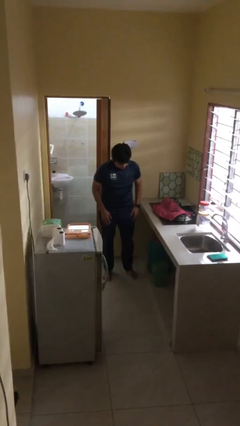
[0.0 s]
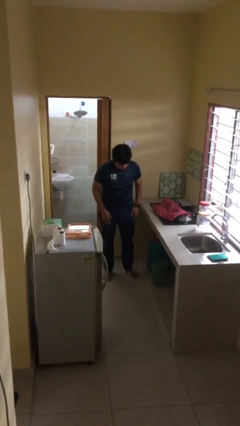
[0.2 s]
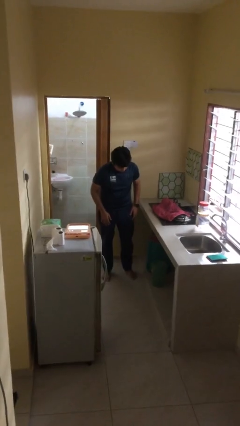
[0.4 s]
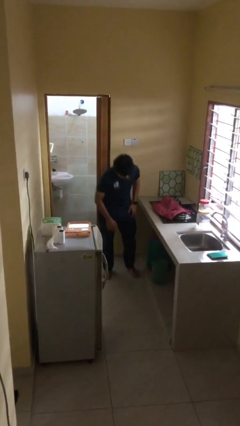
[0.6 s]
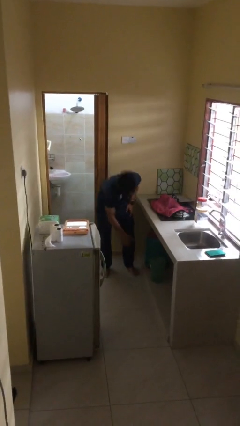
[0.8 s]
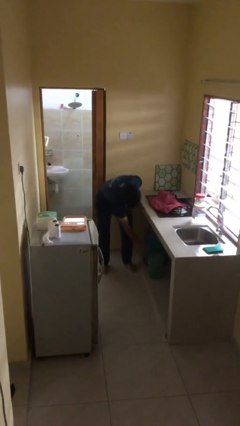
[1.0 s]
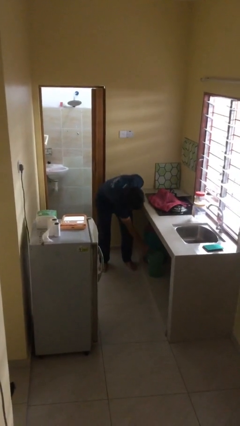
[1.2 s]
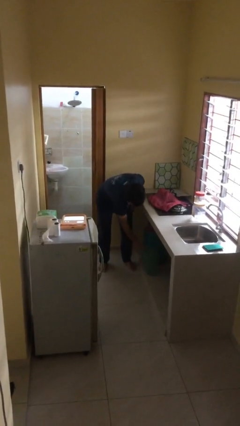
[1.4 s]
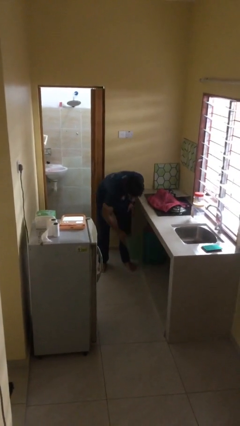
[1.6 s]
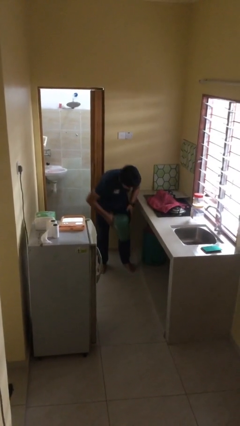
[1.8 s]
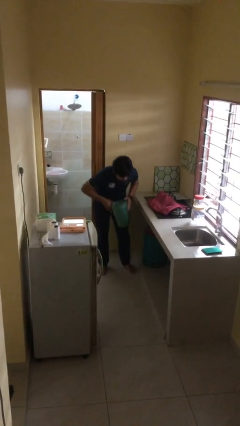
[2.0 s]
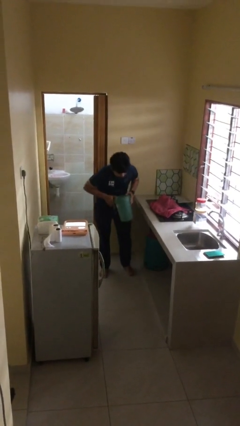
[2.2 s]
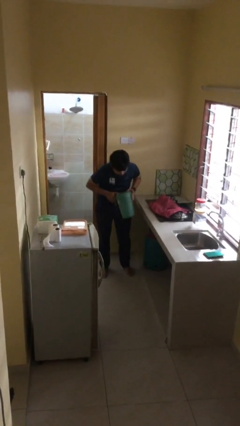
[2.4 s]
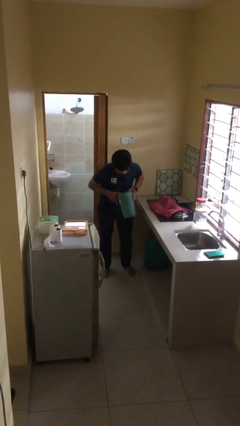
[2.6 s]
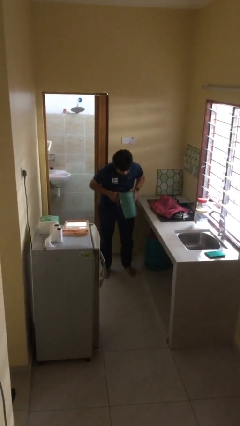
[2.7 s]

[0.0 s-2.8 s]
person picks up object from cabinet

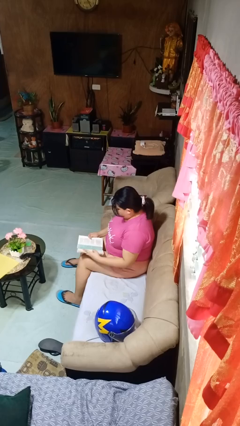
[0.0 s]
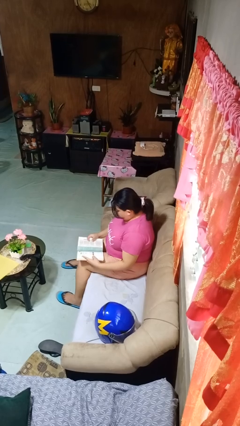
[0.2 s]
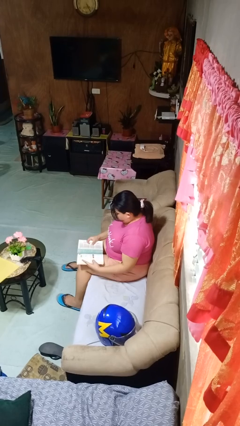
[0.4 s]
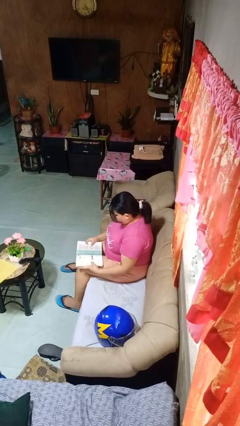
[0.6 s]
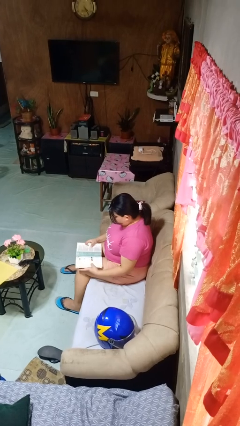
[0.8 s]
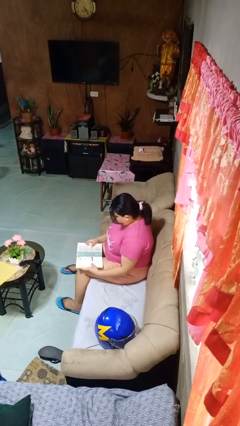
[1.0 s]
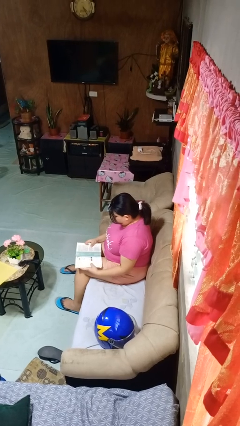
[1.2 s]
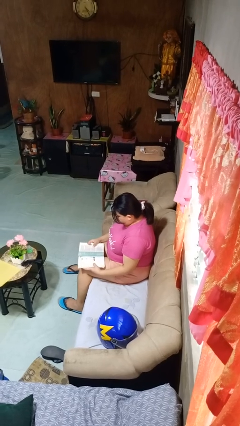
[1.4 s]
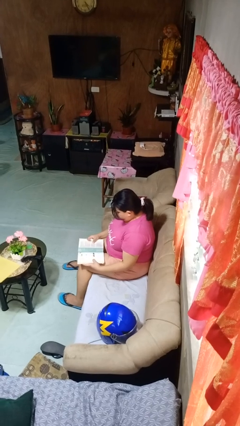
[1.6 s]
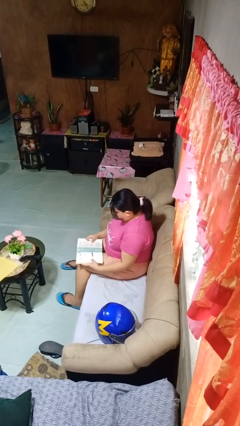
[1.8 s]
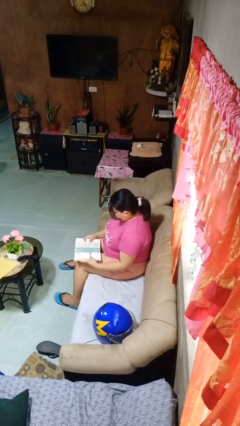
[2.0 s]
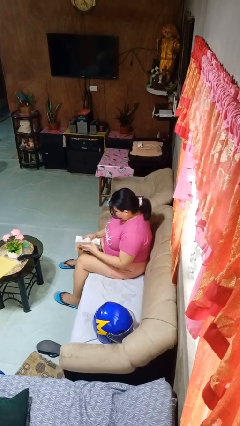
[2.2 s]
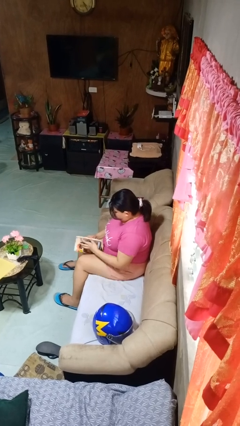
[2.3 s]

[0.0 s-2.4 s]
person reads book

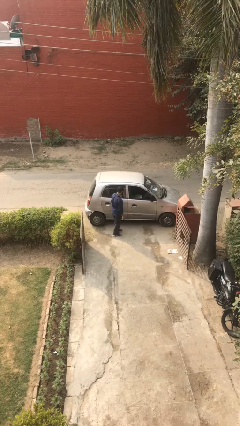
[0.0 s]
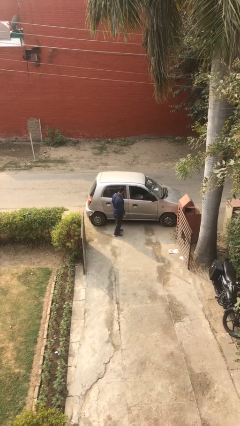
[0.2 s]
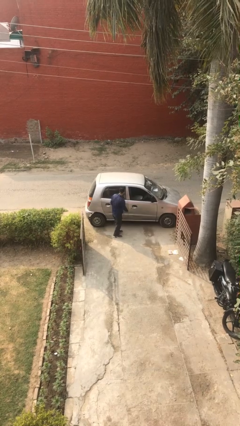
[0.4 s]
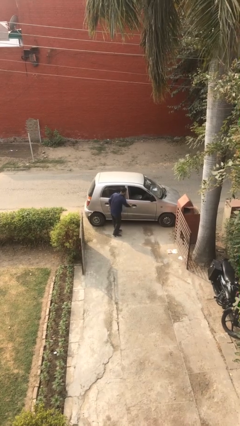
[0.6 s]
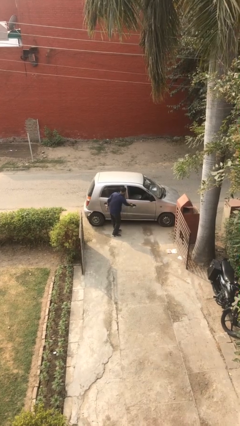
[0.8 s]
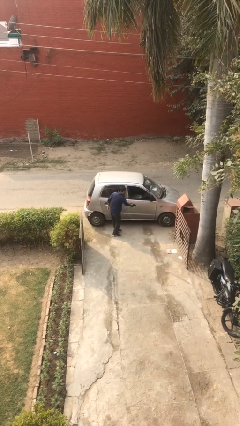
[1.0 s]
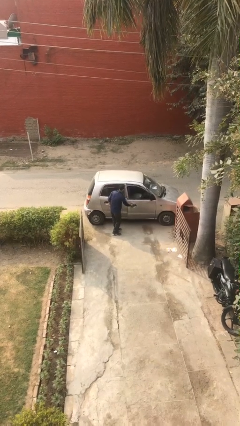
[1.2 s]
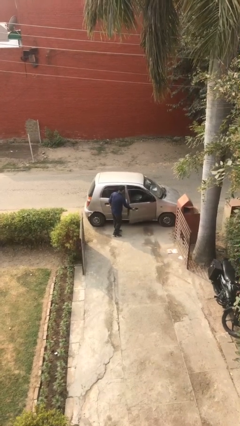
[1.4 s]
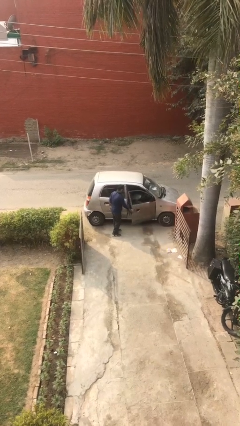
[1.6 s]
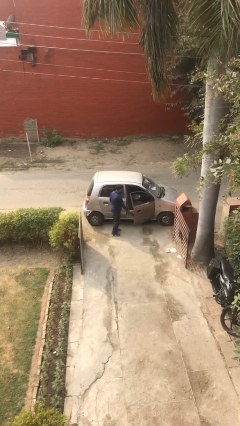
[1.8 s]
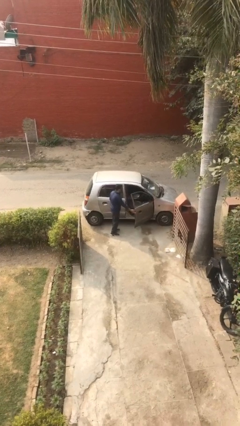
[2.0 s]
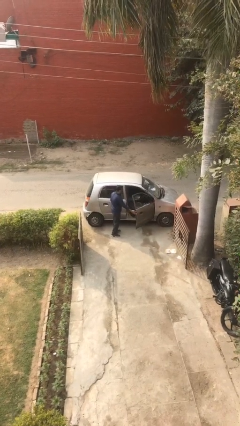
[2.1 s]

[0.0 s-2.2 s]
person opens car door

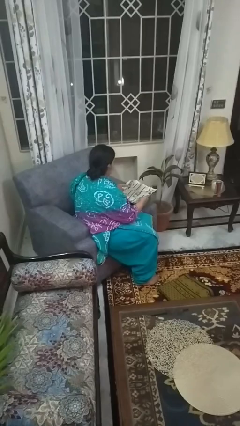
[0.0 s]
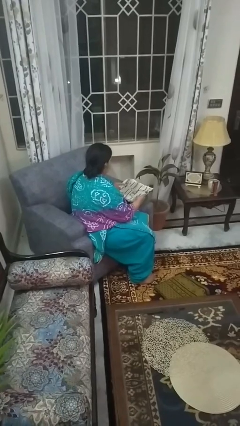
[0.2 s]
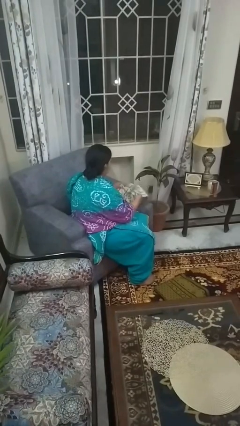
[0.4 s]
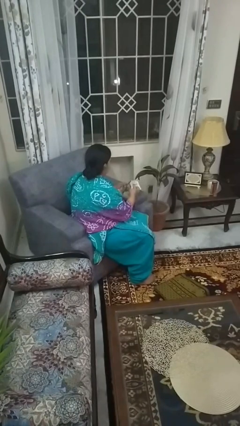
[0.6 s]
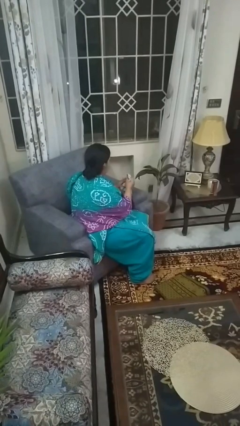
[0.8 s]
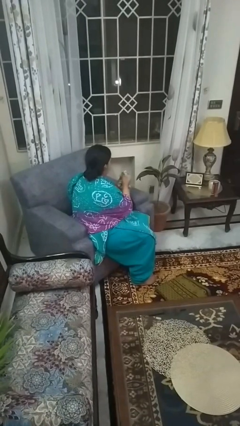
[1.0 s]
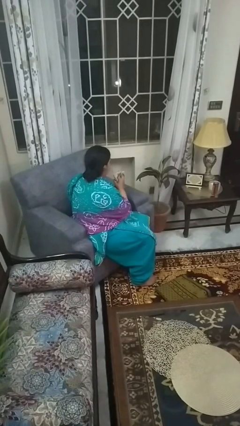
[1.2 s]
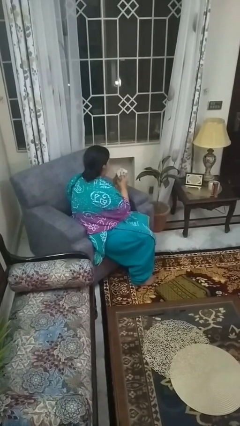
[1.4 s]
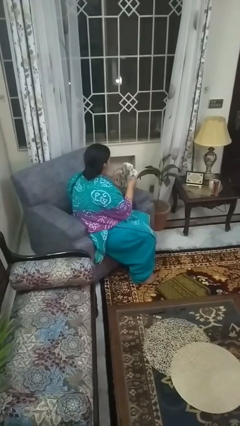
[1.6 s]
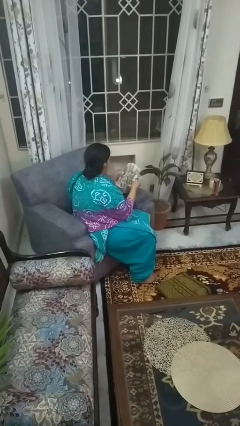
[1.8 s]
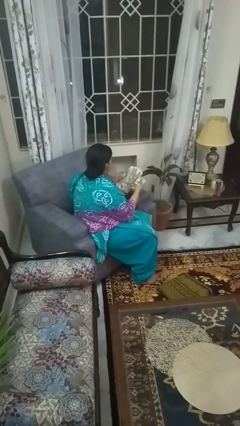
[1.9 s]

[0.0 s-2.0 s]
person crumples paper

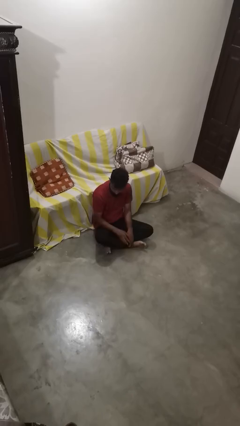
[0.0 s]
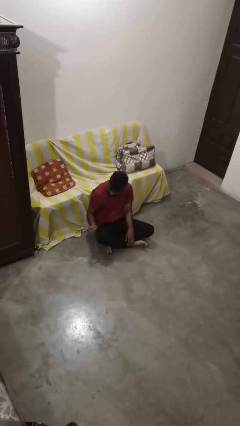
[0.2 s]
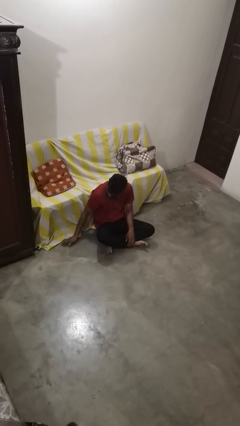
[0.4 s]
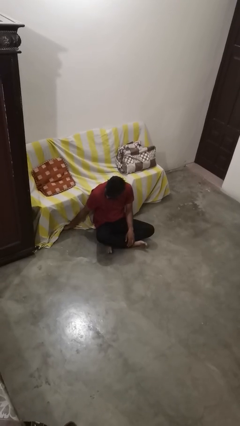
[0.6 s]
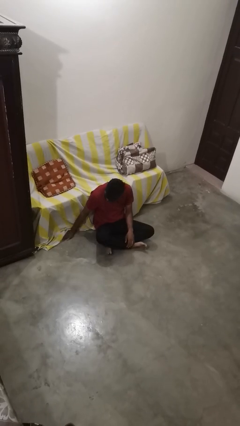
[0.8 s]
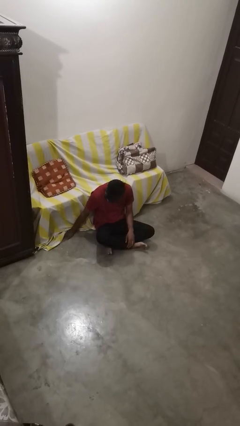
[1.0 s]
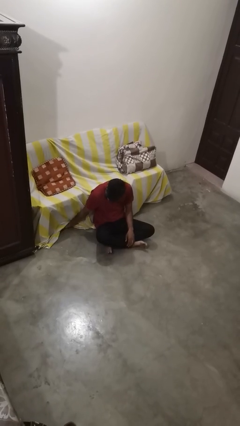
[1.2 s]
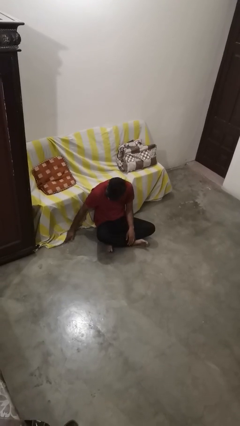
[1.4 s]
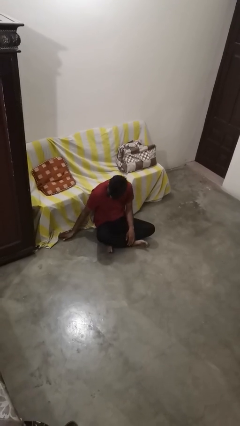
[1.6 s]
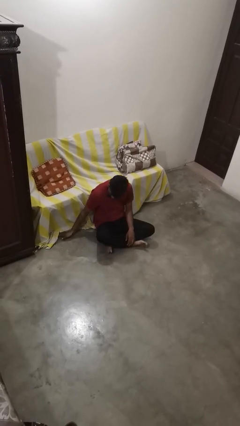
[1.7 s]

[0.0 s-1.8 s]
person searches under couch

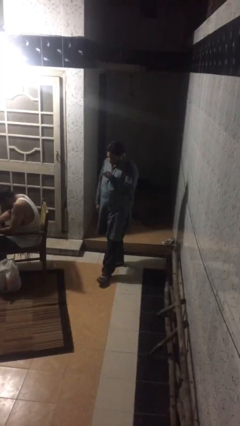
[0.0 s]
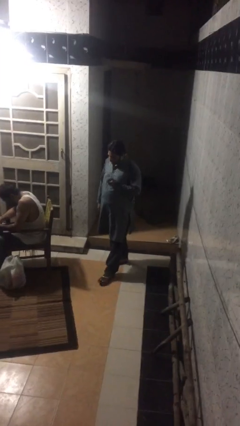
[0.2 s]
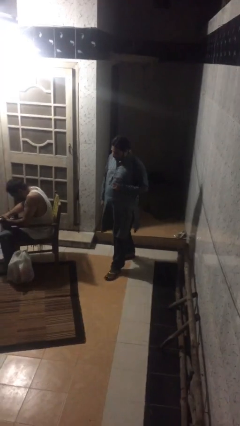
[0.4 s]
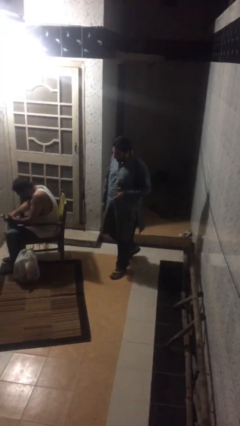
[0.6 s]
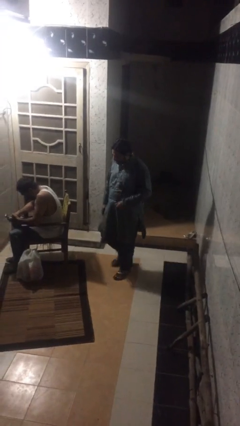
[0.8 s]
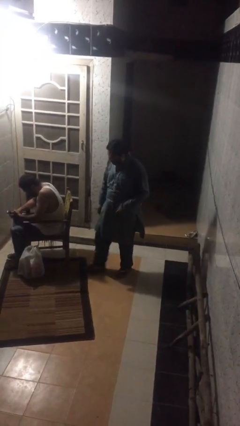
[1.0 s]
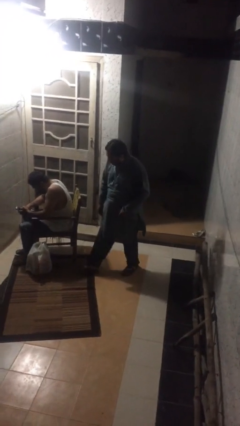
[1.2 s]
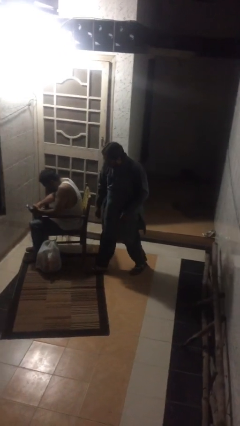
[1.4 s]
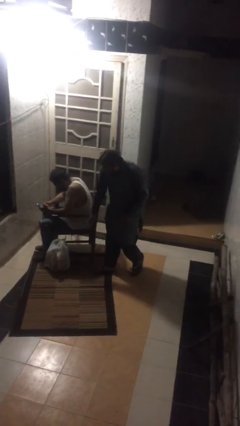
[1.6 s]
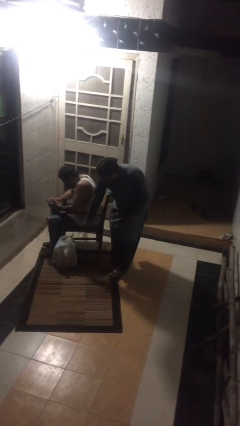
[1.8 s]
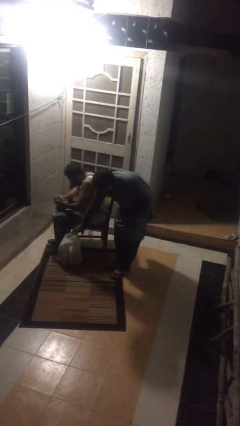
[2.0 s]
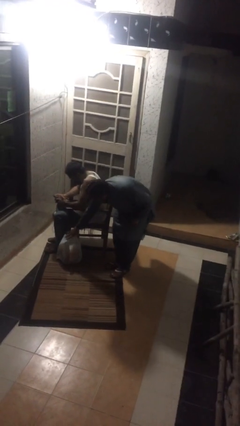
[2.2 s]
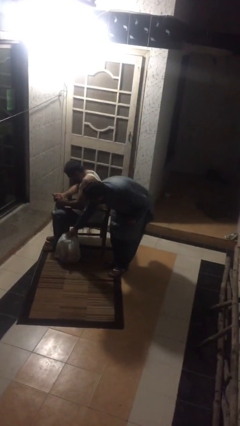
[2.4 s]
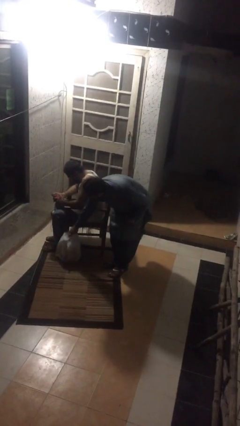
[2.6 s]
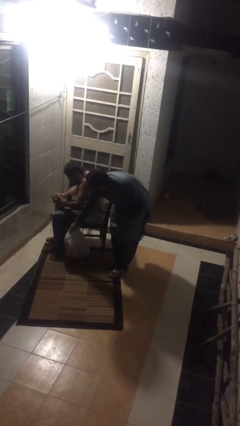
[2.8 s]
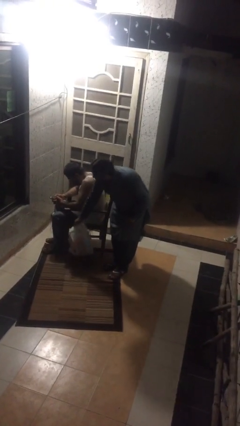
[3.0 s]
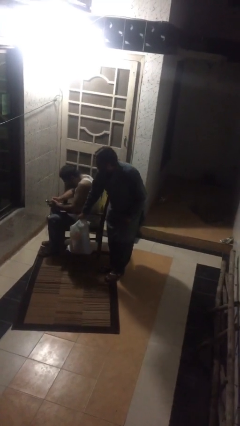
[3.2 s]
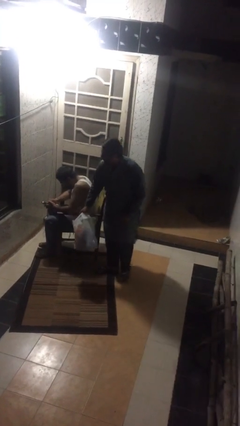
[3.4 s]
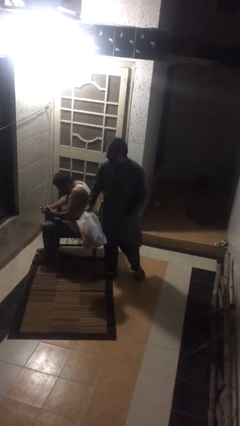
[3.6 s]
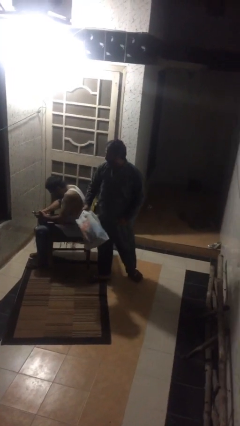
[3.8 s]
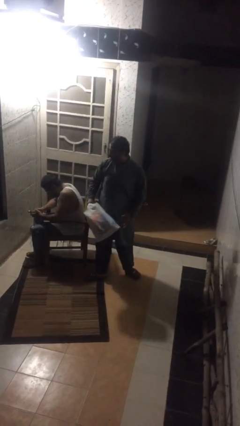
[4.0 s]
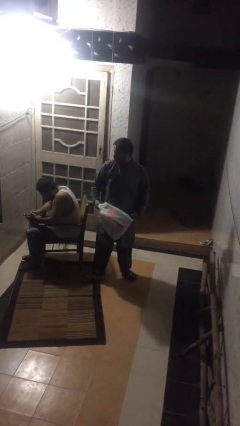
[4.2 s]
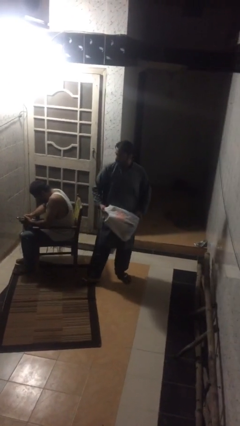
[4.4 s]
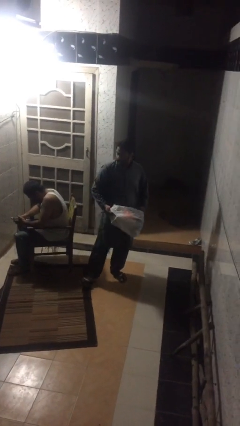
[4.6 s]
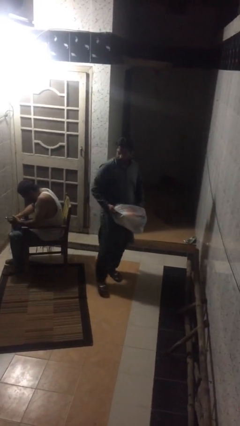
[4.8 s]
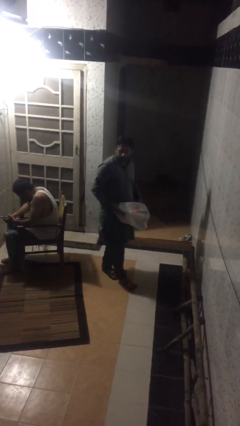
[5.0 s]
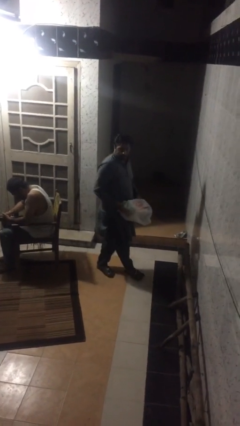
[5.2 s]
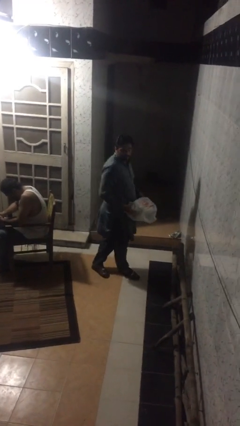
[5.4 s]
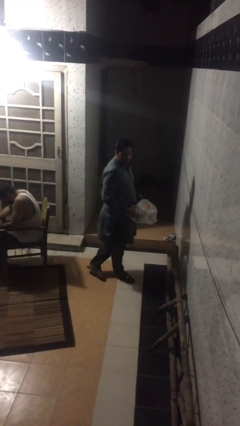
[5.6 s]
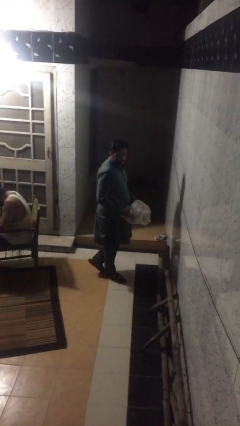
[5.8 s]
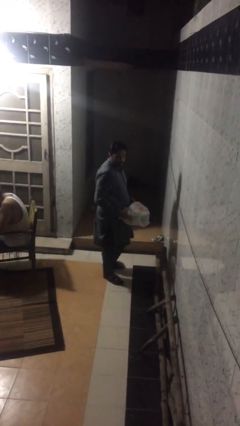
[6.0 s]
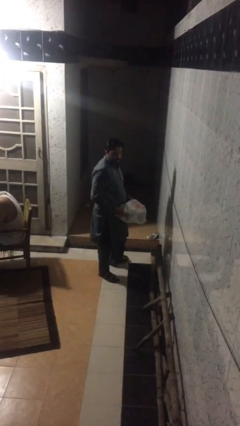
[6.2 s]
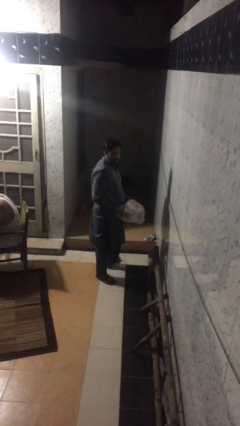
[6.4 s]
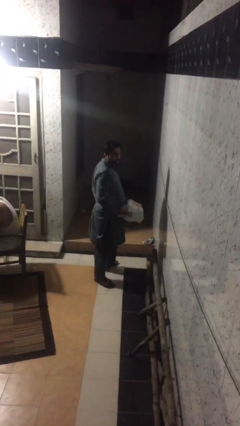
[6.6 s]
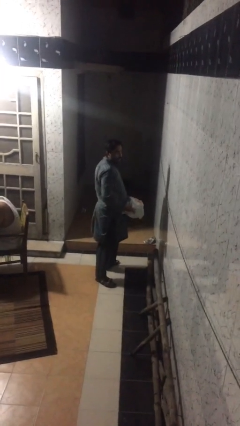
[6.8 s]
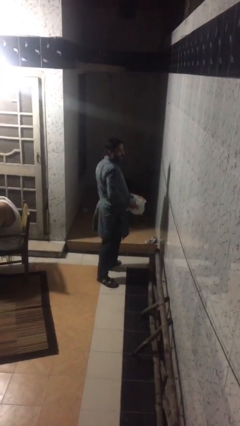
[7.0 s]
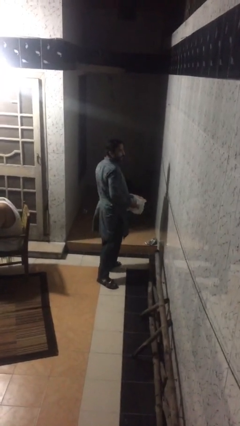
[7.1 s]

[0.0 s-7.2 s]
person steals object from person
